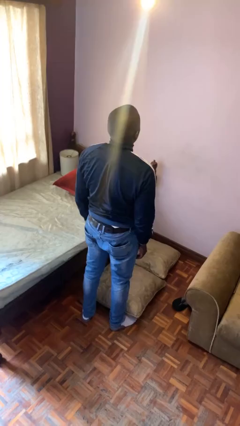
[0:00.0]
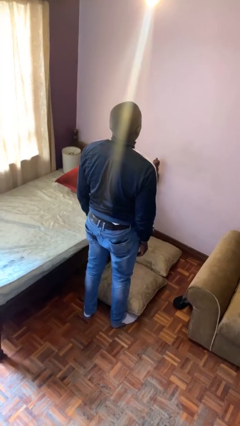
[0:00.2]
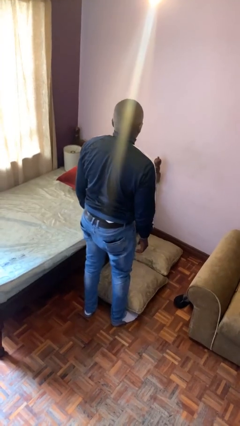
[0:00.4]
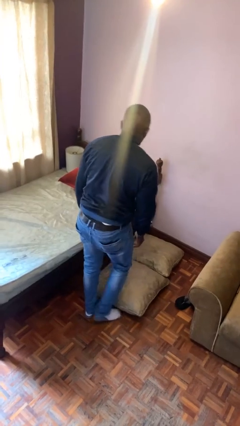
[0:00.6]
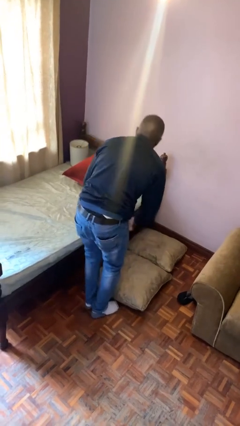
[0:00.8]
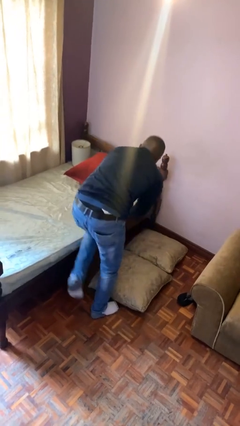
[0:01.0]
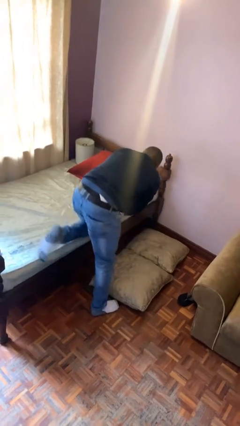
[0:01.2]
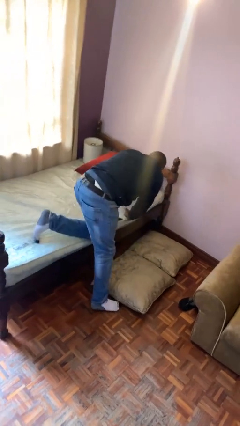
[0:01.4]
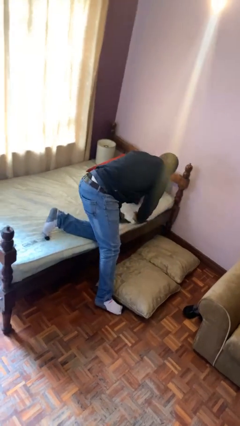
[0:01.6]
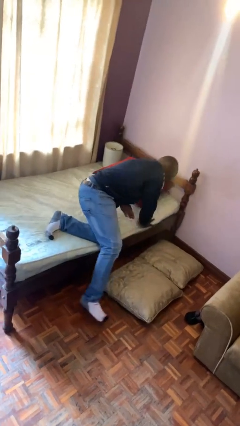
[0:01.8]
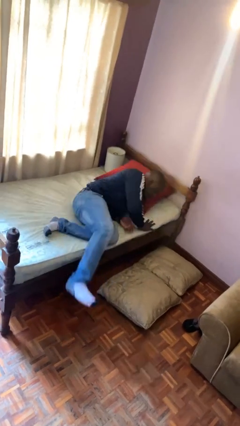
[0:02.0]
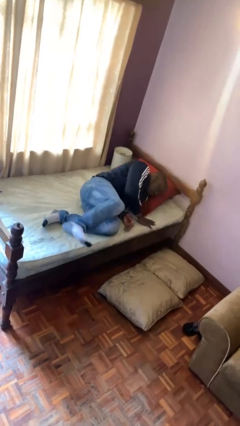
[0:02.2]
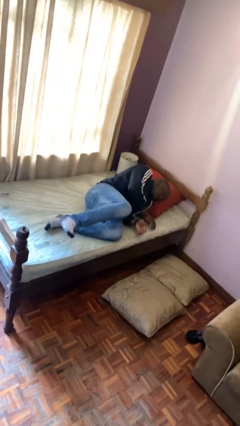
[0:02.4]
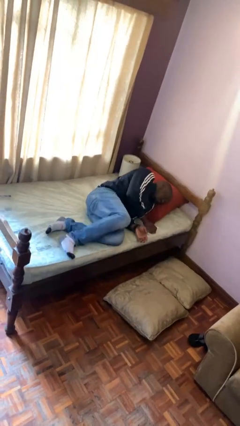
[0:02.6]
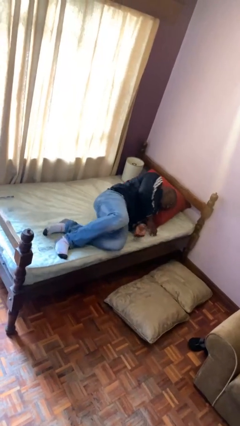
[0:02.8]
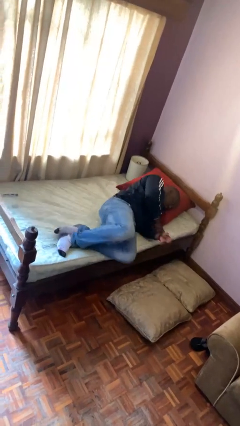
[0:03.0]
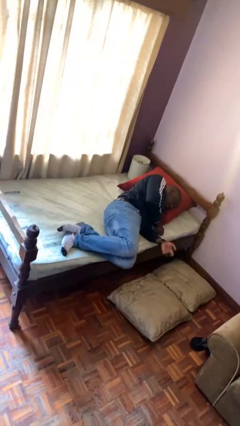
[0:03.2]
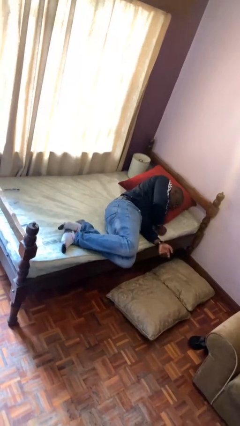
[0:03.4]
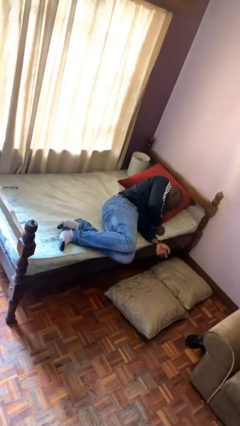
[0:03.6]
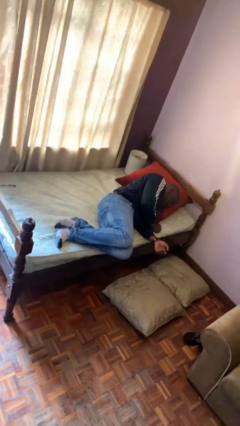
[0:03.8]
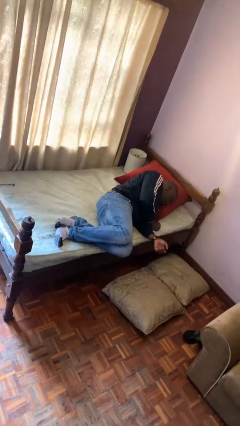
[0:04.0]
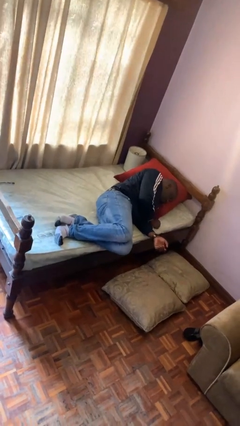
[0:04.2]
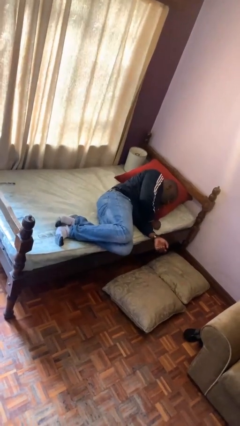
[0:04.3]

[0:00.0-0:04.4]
person lies down on bed

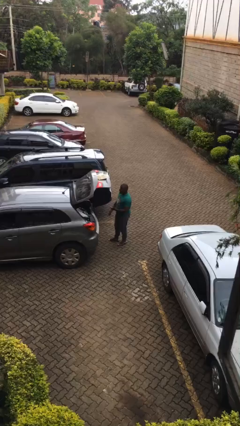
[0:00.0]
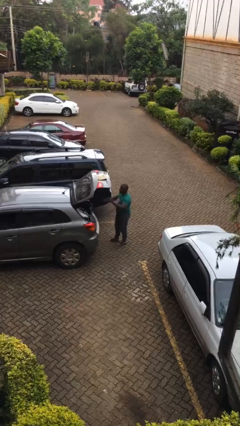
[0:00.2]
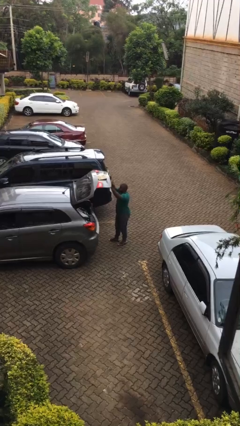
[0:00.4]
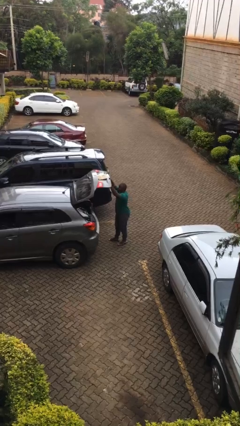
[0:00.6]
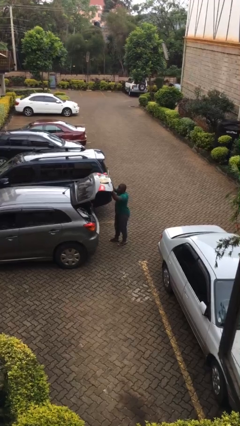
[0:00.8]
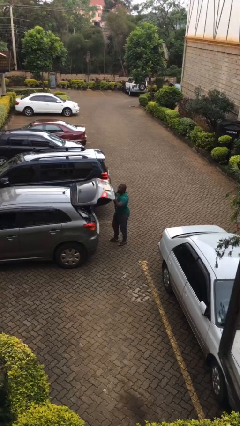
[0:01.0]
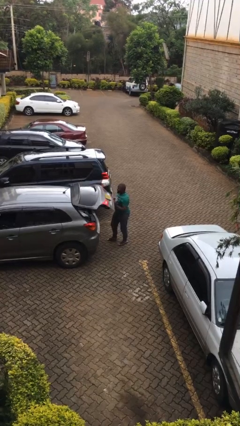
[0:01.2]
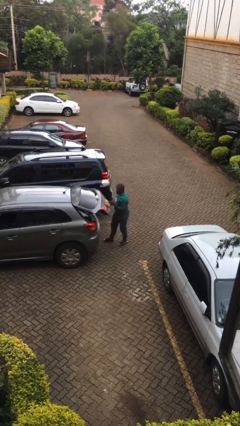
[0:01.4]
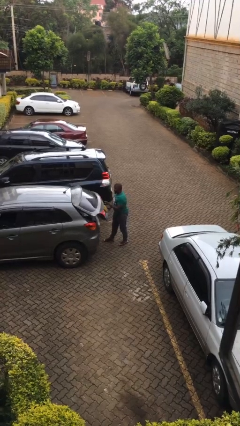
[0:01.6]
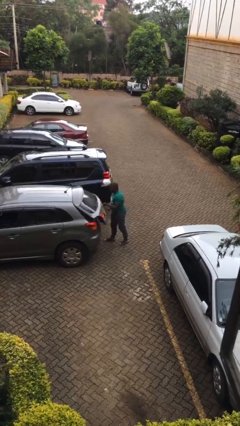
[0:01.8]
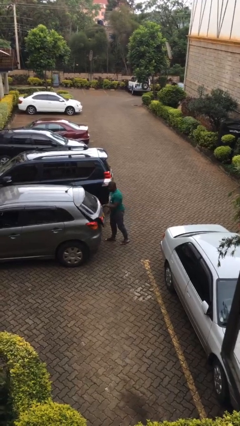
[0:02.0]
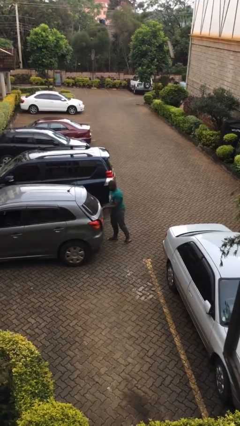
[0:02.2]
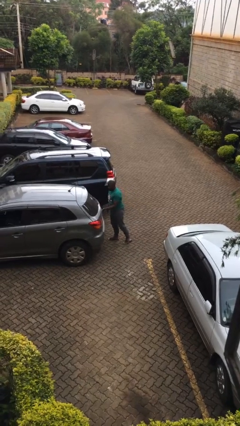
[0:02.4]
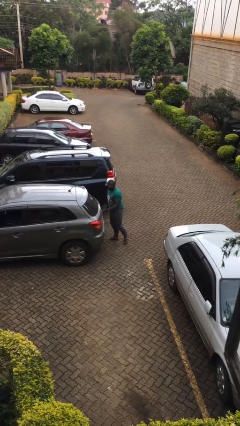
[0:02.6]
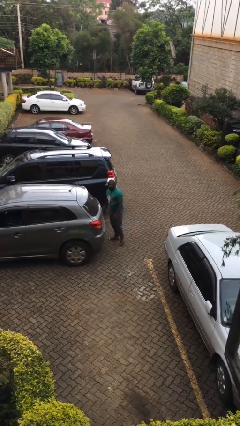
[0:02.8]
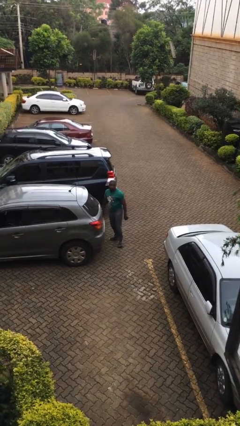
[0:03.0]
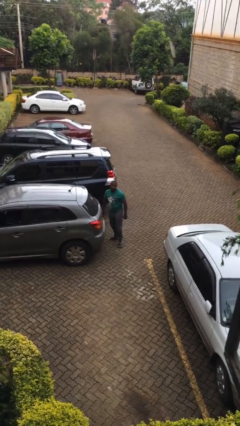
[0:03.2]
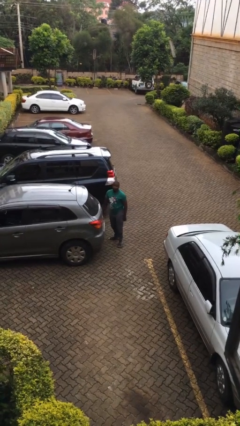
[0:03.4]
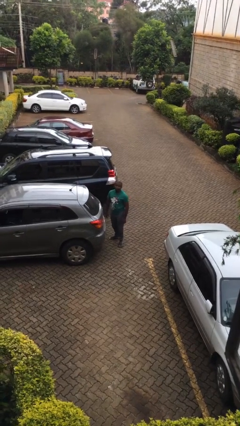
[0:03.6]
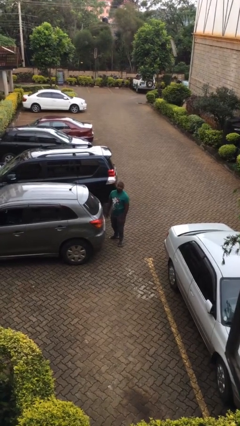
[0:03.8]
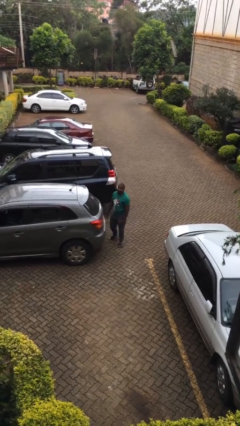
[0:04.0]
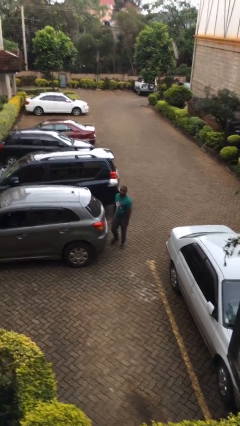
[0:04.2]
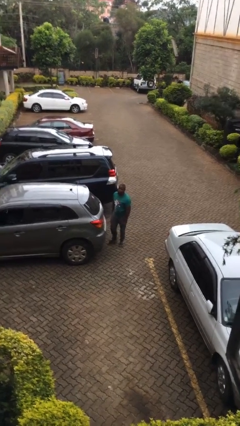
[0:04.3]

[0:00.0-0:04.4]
person closes car trunk

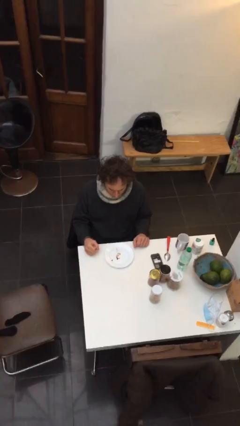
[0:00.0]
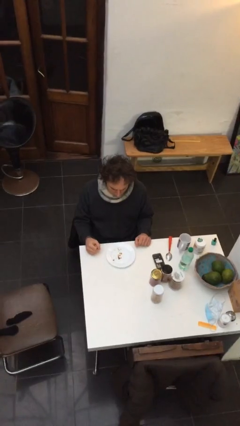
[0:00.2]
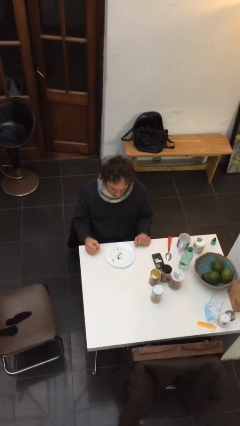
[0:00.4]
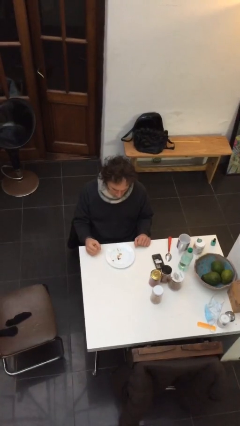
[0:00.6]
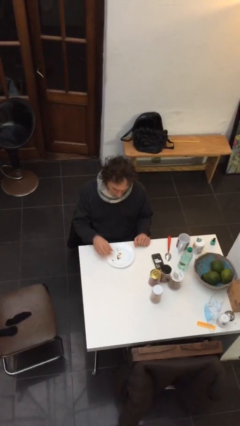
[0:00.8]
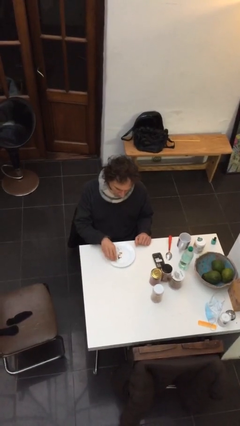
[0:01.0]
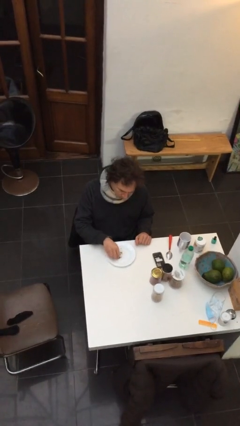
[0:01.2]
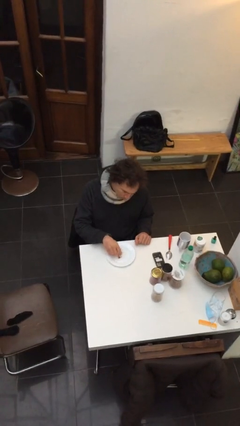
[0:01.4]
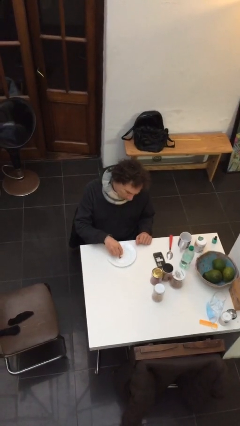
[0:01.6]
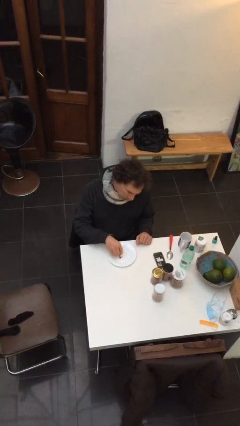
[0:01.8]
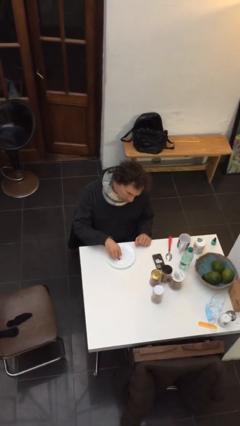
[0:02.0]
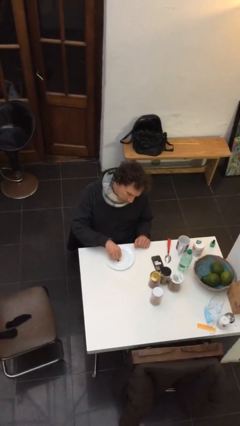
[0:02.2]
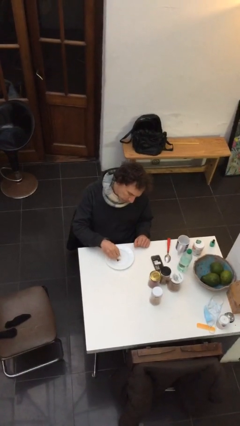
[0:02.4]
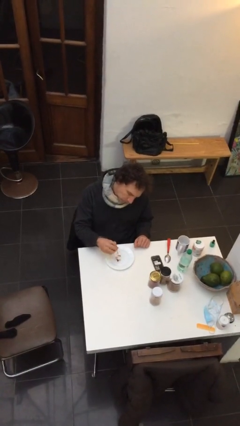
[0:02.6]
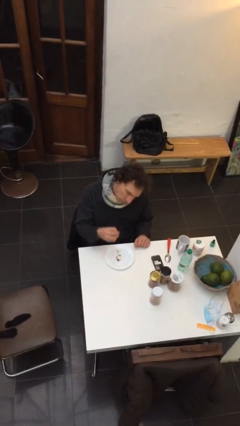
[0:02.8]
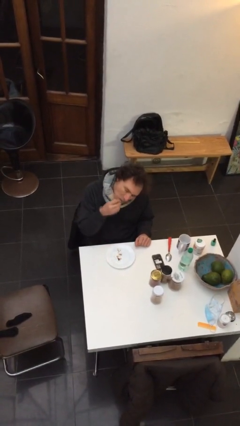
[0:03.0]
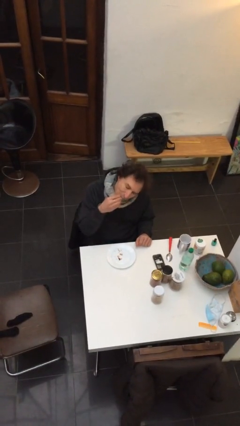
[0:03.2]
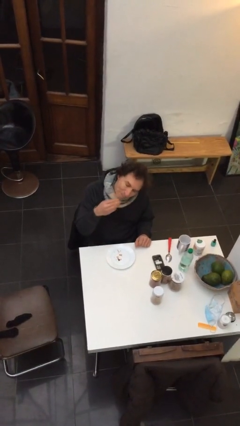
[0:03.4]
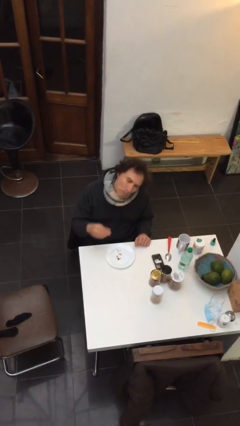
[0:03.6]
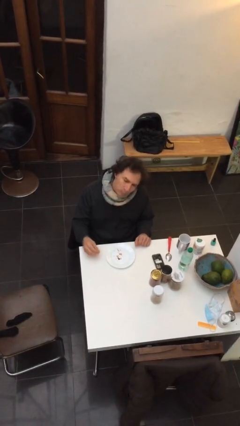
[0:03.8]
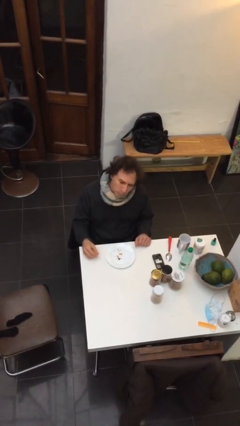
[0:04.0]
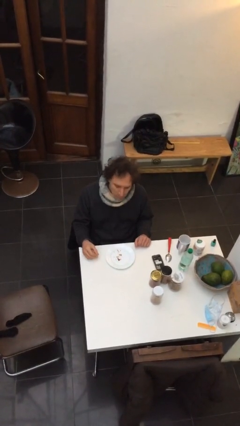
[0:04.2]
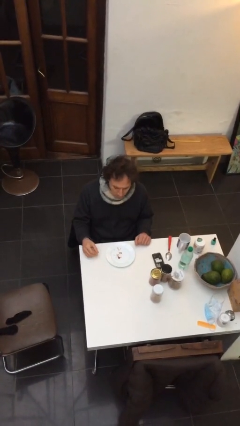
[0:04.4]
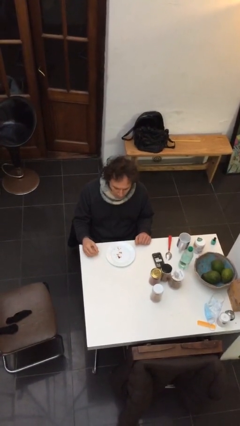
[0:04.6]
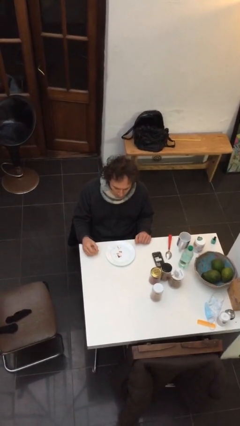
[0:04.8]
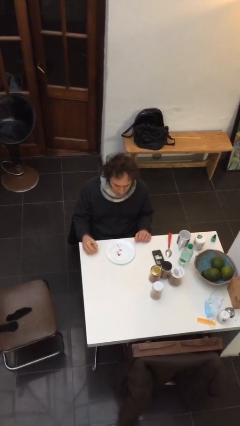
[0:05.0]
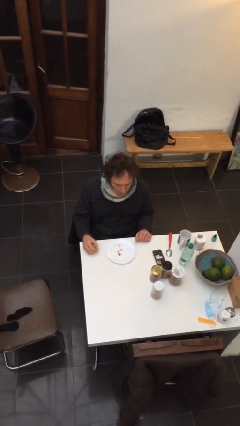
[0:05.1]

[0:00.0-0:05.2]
person eats with hands

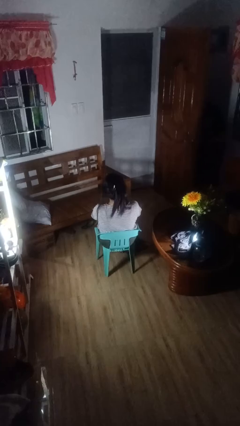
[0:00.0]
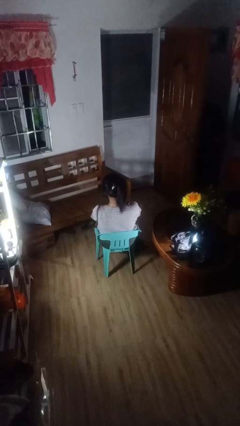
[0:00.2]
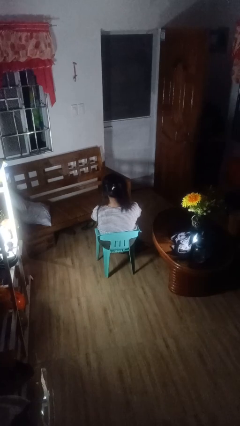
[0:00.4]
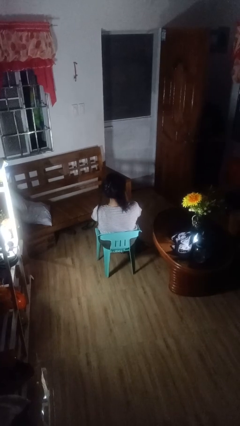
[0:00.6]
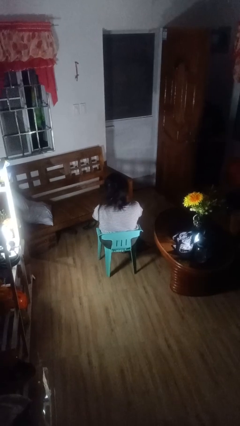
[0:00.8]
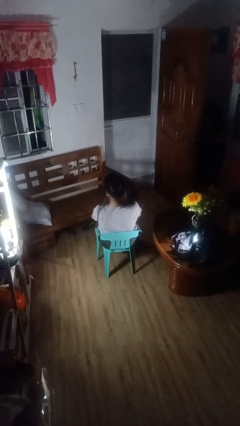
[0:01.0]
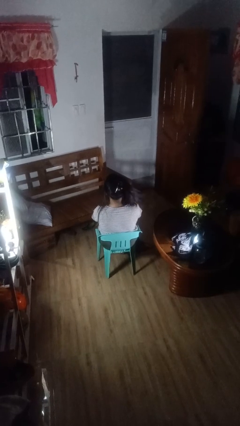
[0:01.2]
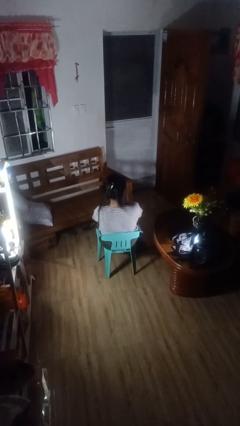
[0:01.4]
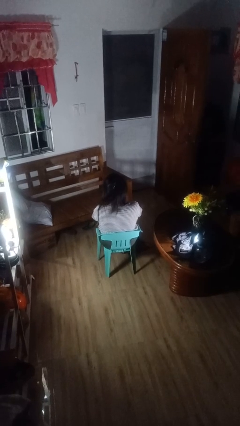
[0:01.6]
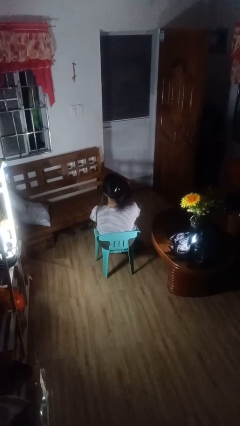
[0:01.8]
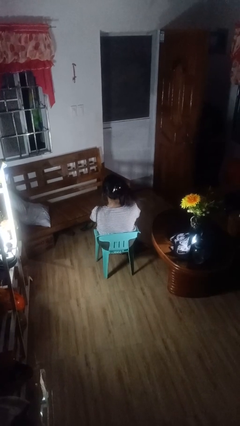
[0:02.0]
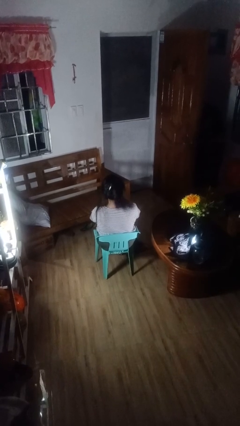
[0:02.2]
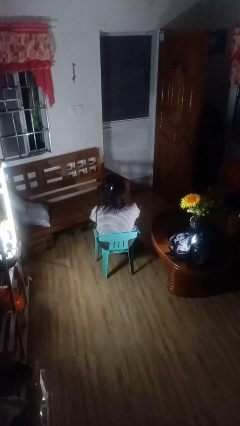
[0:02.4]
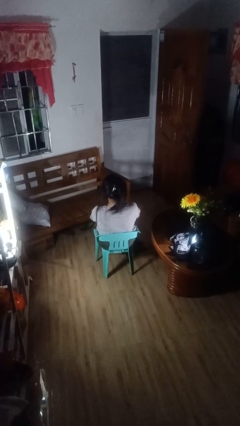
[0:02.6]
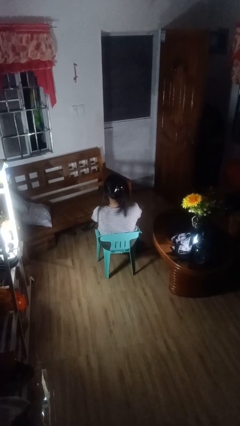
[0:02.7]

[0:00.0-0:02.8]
person shakes head

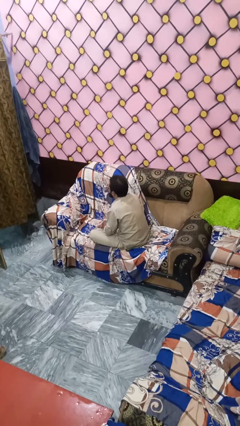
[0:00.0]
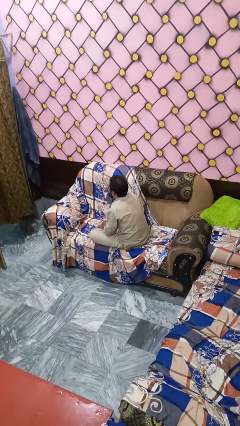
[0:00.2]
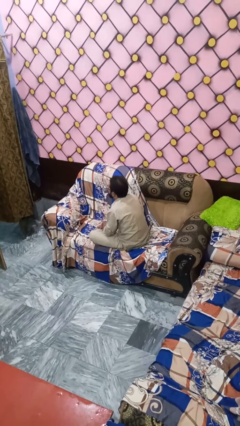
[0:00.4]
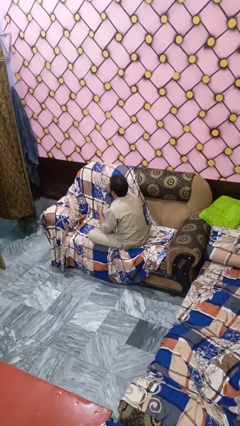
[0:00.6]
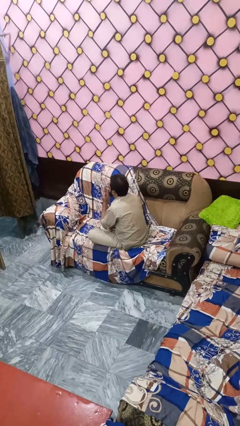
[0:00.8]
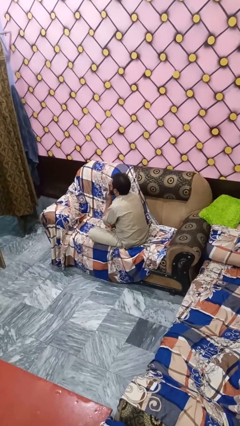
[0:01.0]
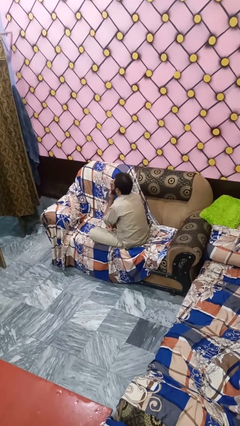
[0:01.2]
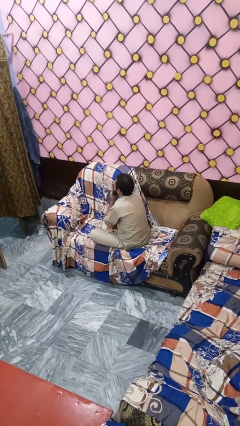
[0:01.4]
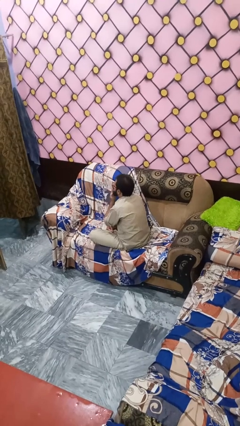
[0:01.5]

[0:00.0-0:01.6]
person gestures blow kiss
